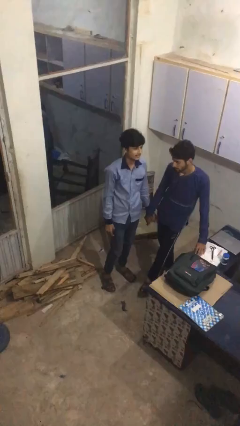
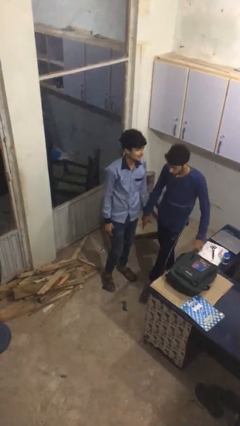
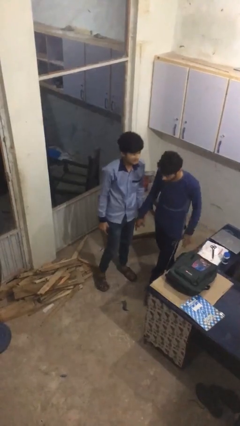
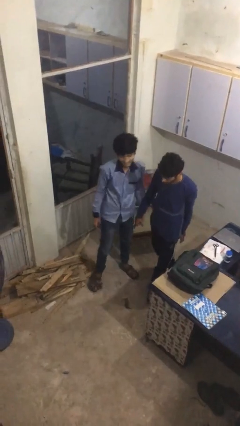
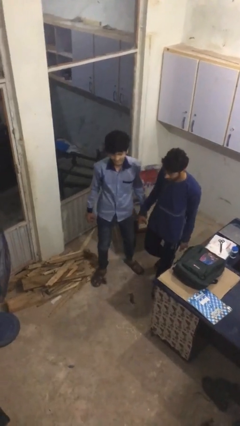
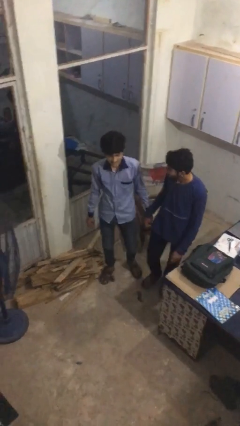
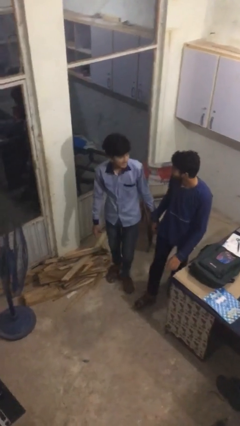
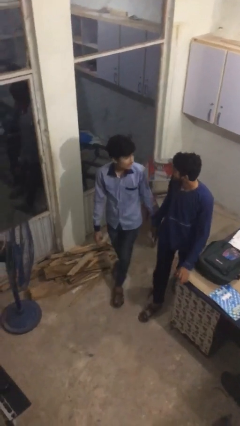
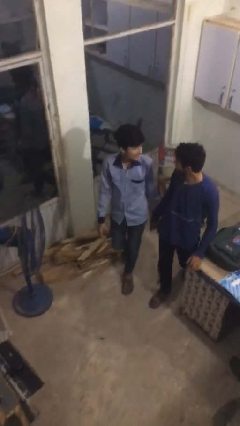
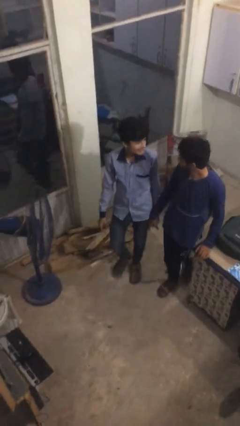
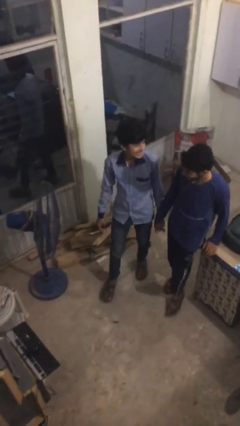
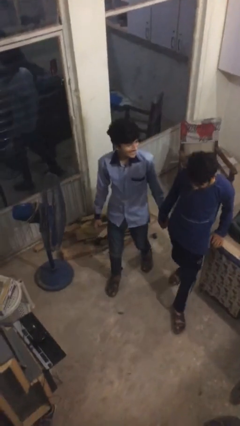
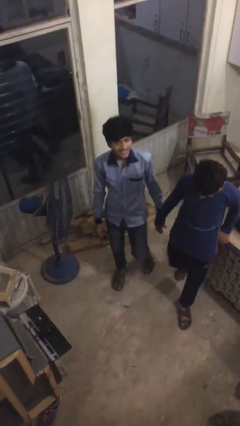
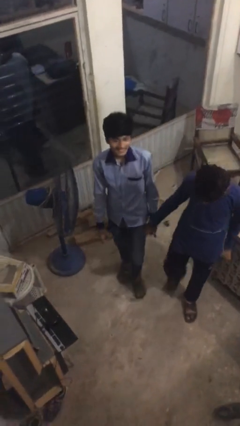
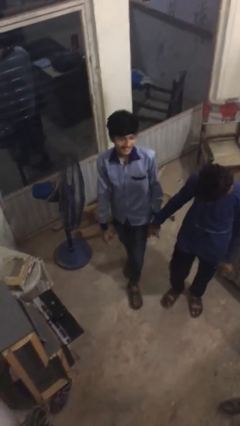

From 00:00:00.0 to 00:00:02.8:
person holds hand

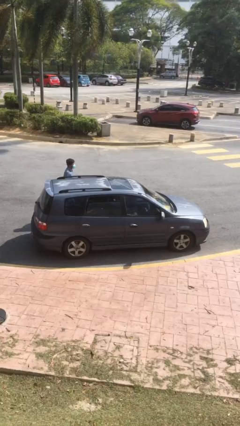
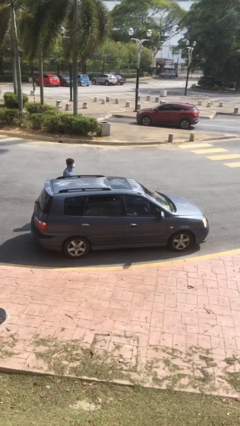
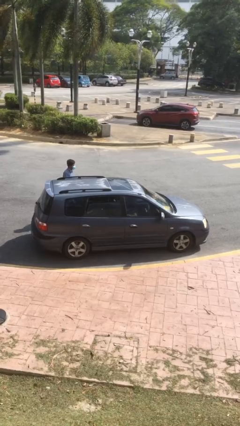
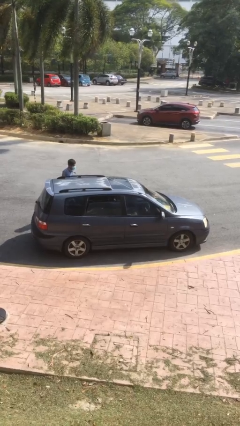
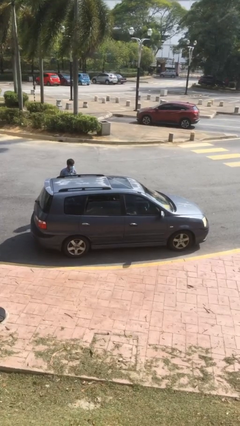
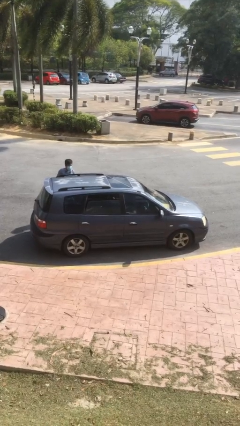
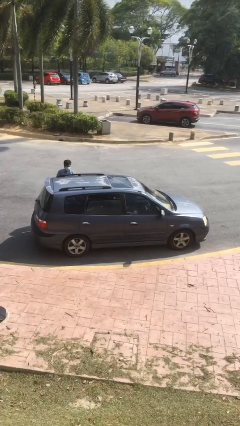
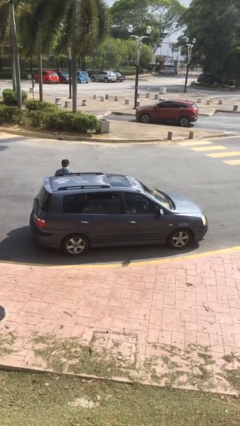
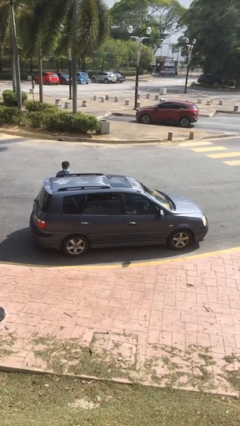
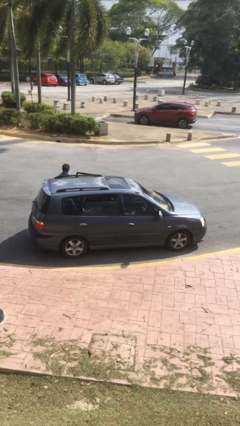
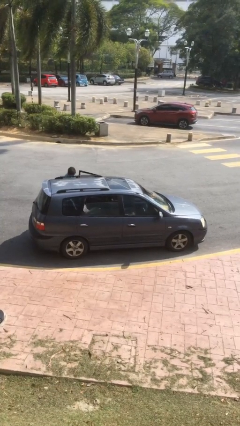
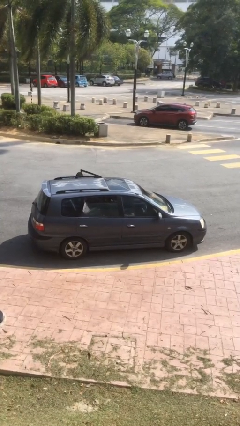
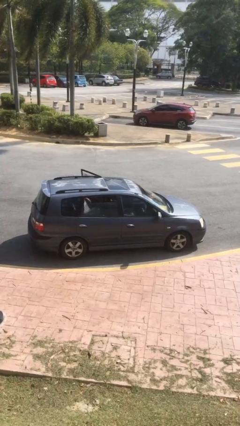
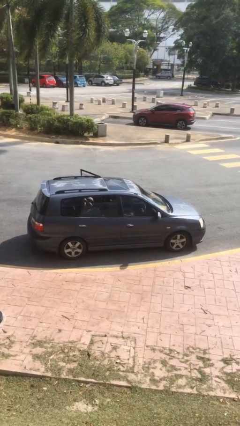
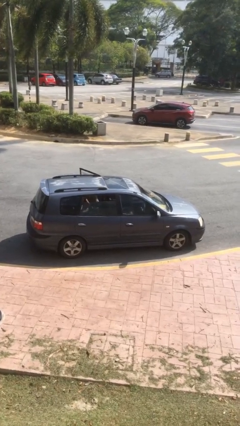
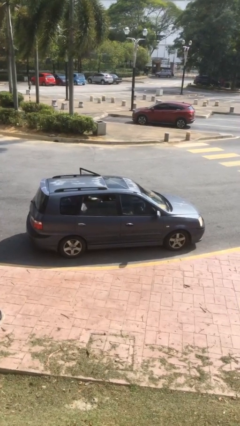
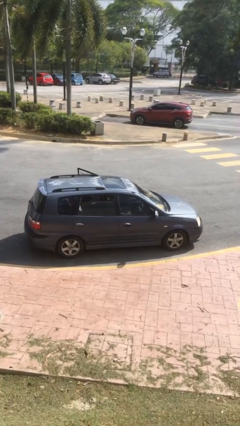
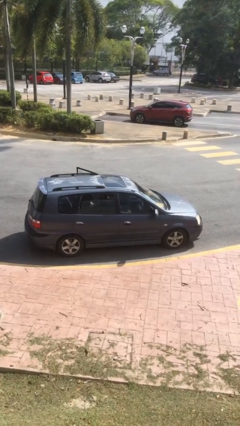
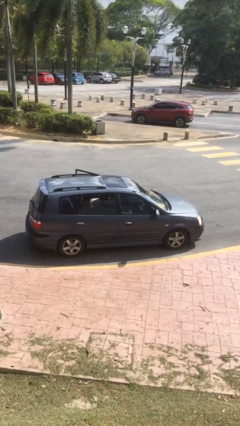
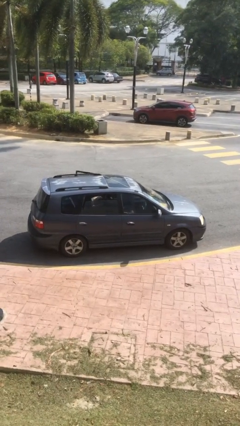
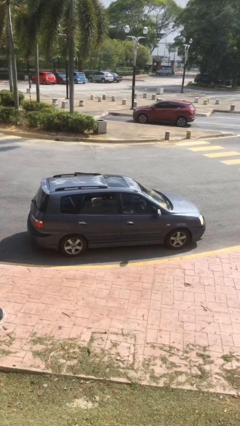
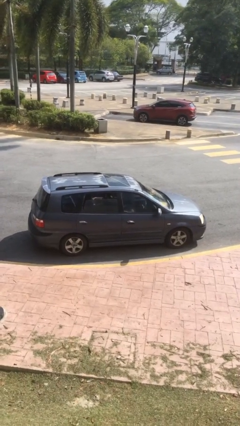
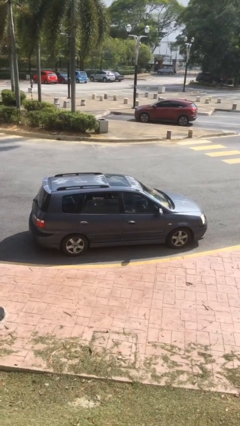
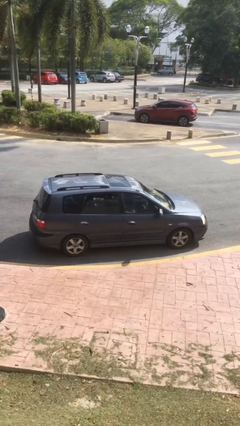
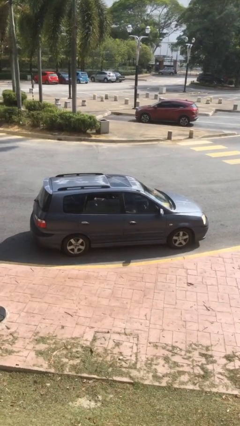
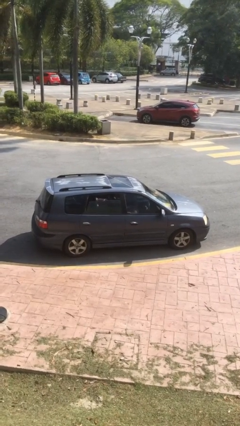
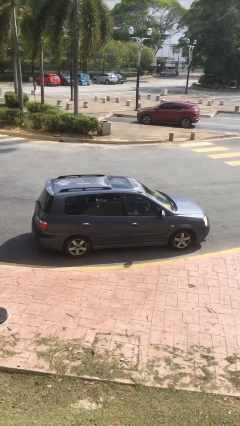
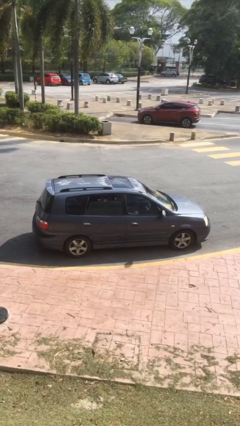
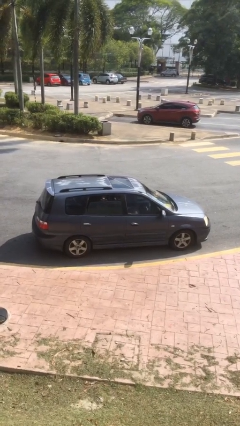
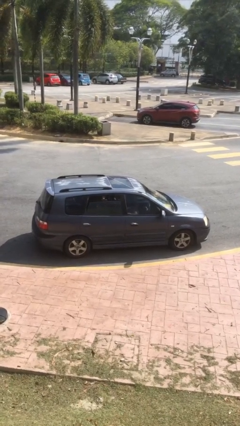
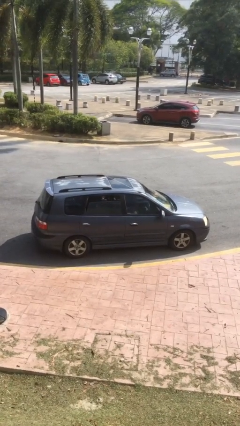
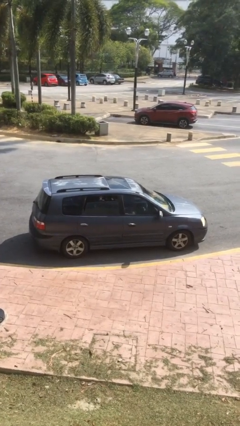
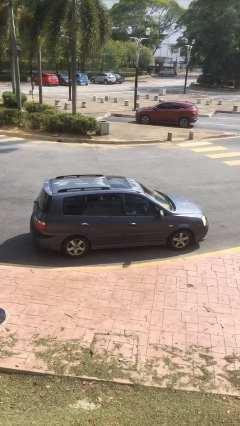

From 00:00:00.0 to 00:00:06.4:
car picks up person

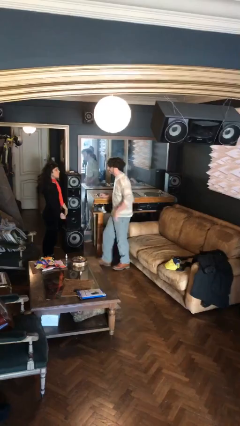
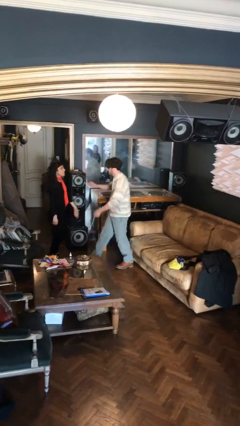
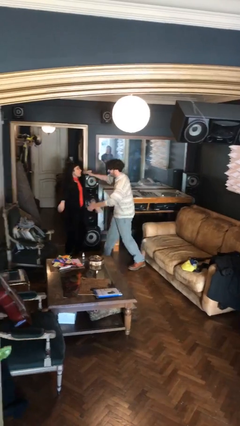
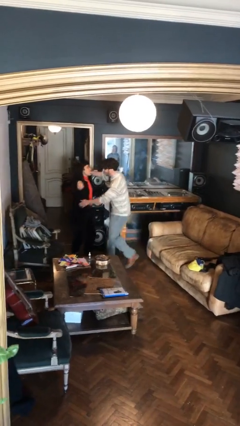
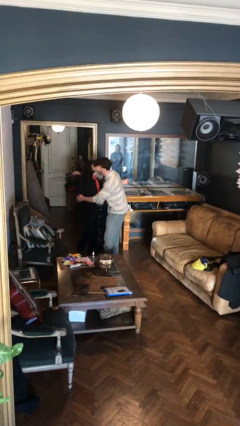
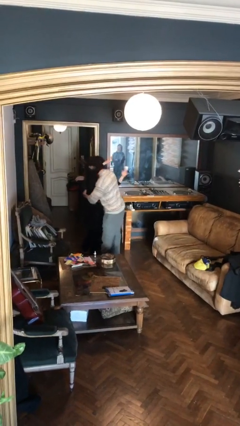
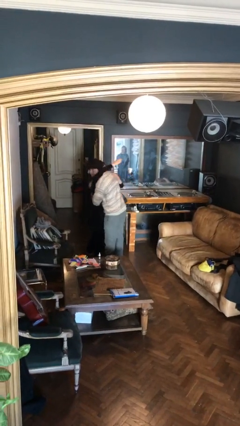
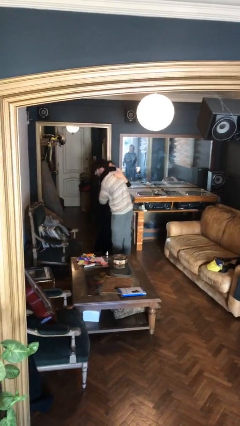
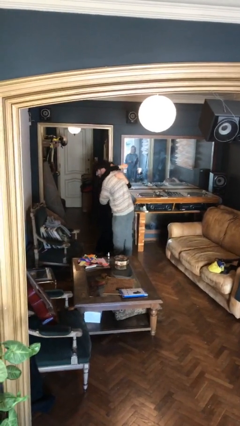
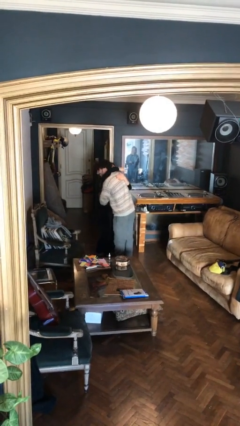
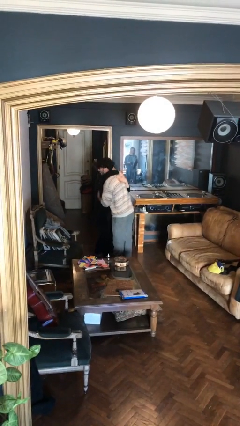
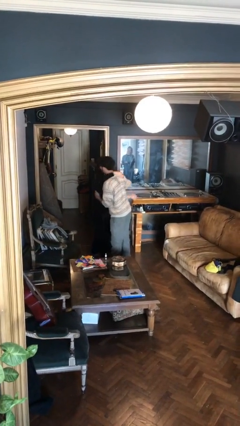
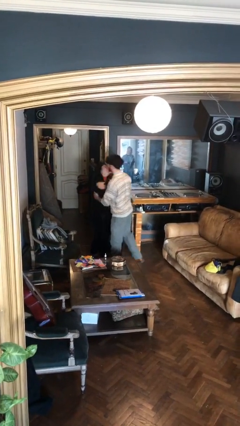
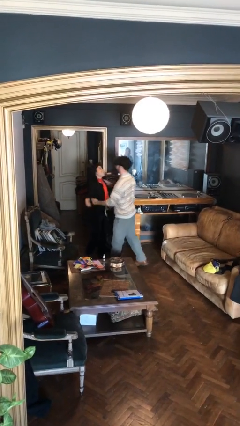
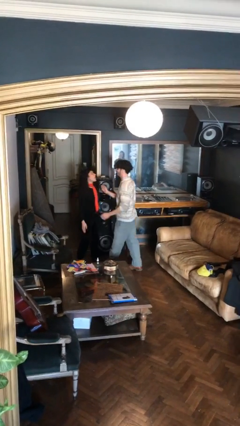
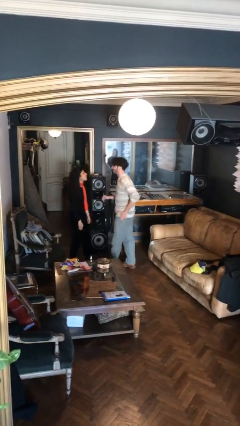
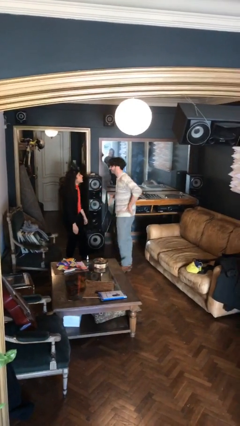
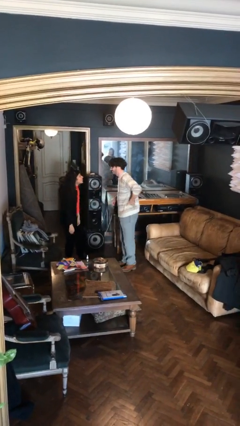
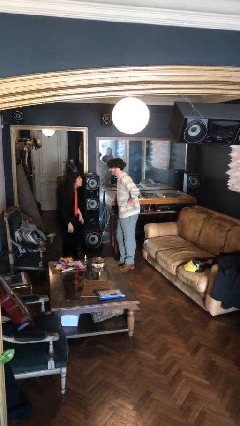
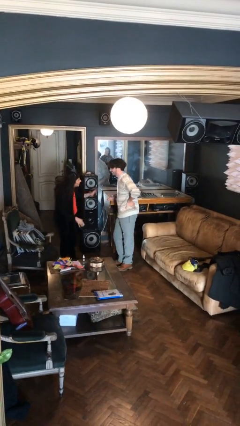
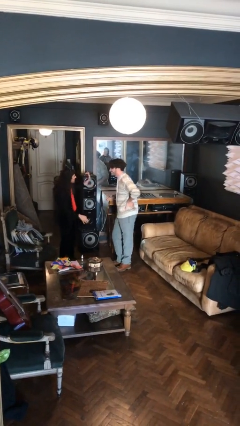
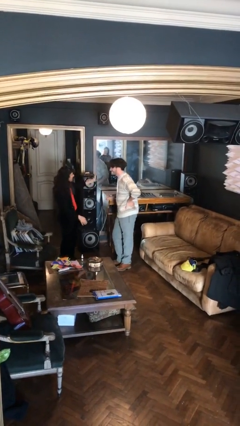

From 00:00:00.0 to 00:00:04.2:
person embraces person

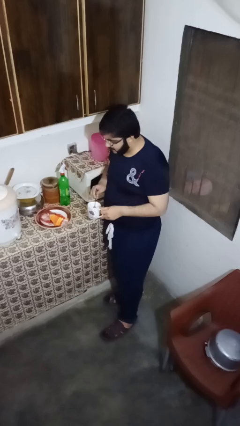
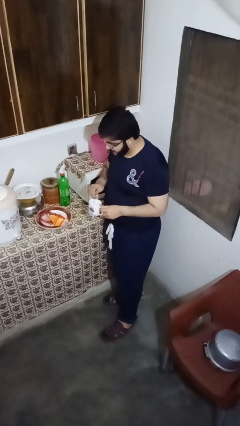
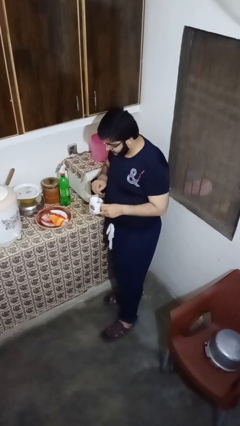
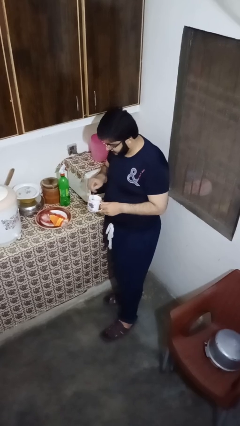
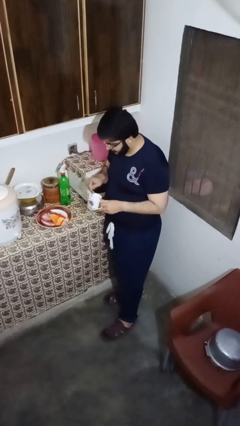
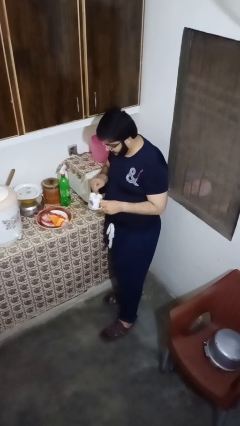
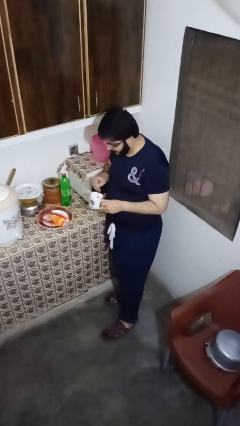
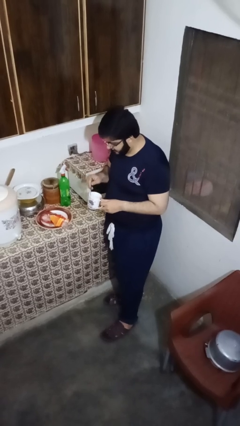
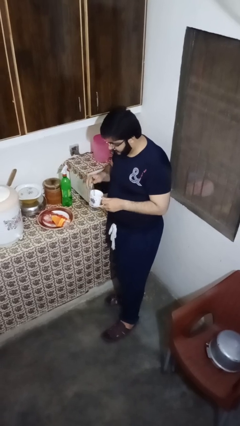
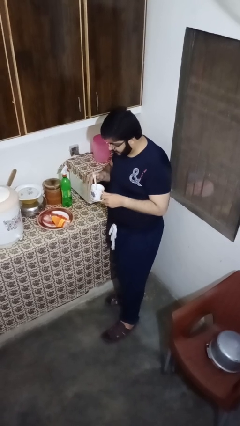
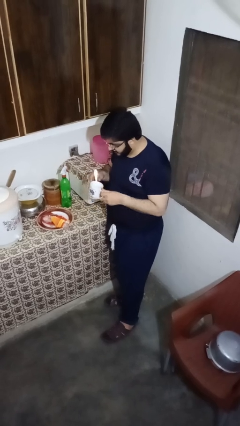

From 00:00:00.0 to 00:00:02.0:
person stirs mug

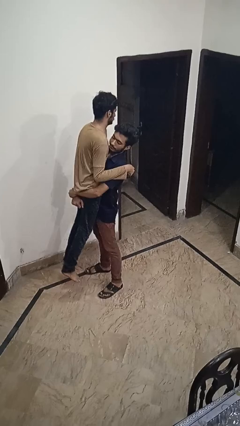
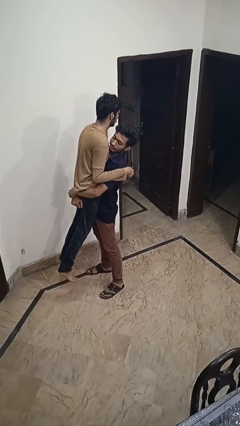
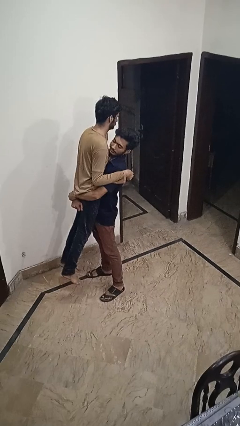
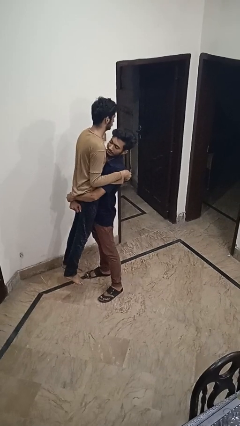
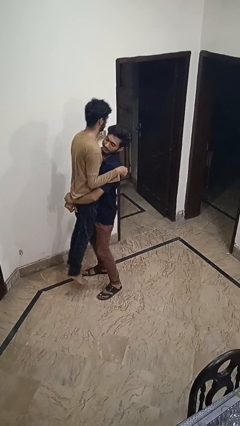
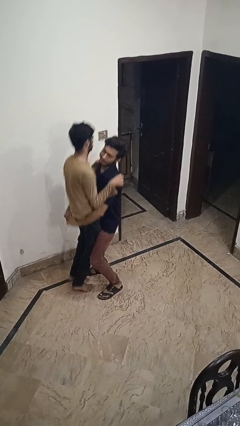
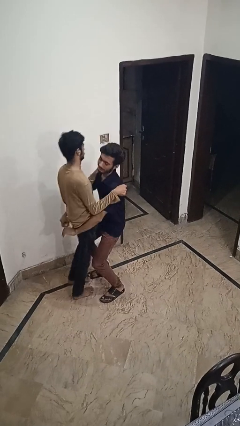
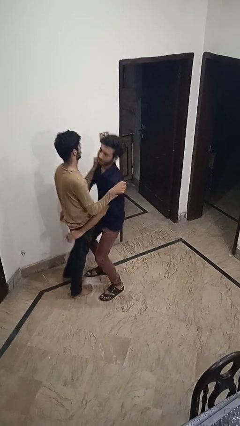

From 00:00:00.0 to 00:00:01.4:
person puts down person

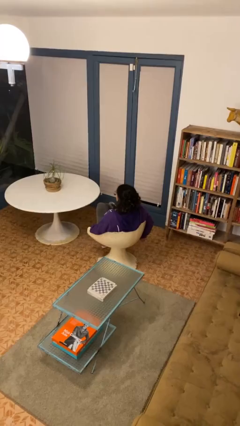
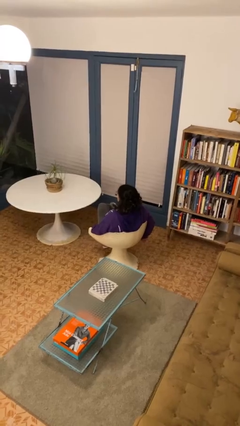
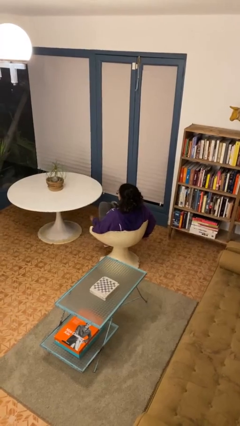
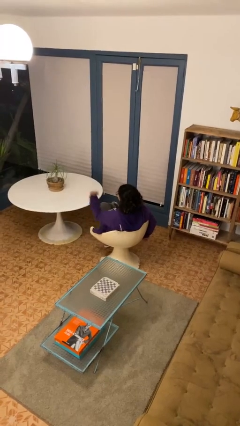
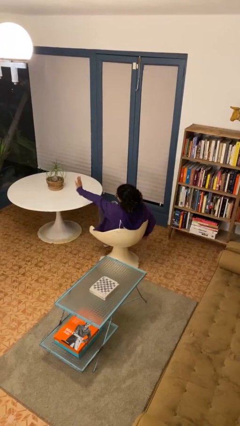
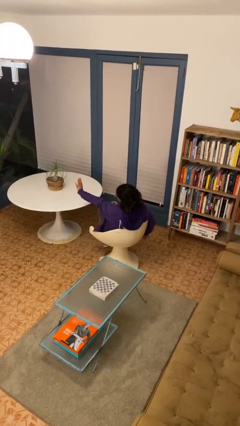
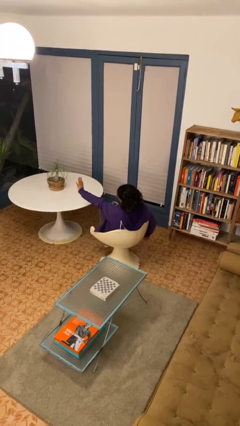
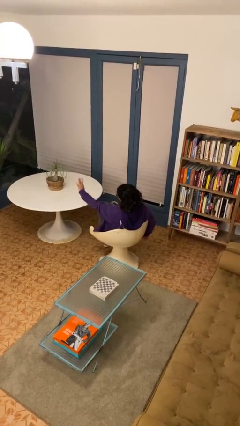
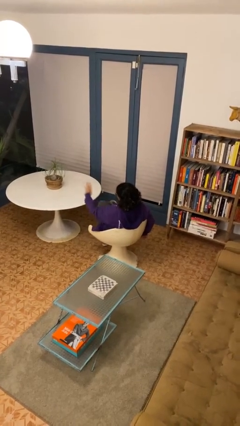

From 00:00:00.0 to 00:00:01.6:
person gestures stop
